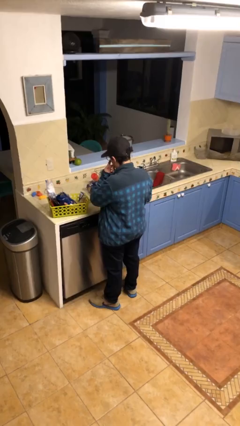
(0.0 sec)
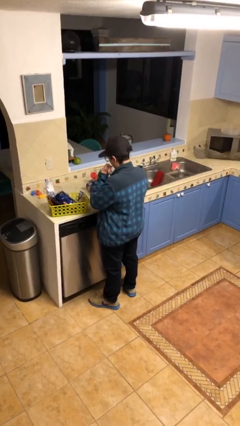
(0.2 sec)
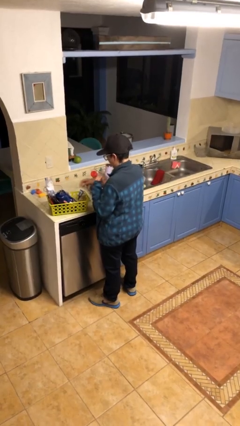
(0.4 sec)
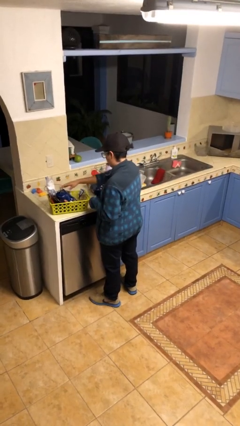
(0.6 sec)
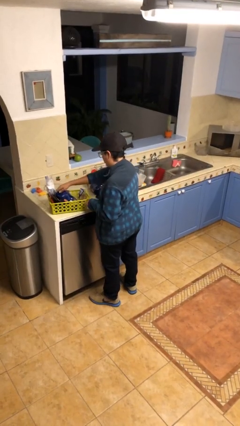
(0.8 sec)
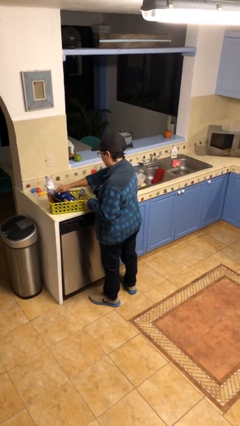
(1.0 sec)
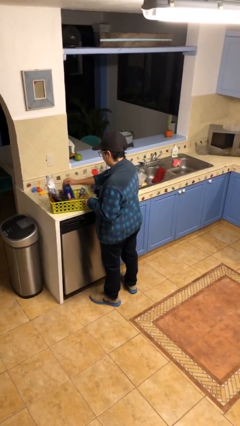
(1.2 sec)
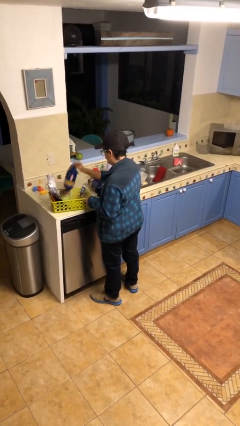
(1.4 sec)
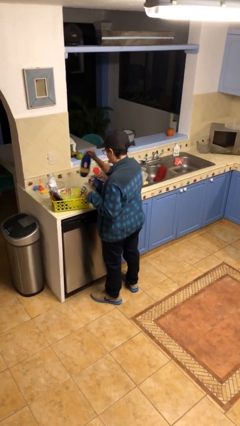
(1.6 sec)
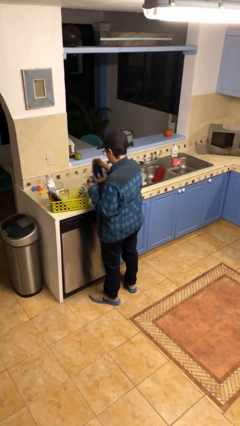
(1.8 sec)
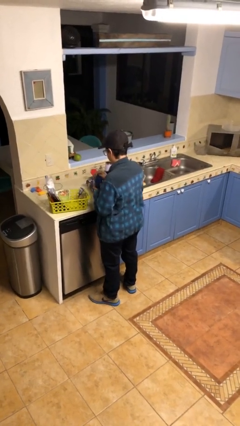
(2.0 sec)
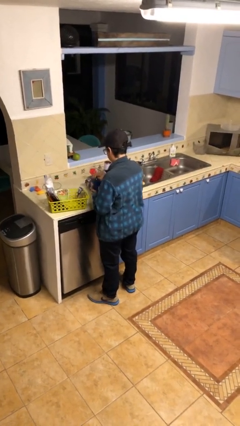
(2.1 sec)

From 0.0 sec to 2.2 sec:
person takes object from basket

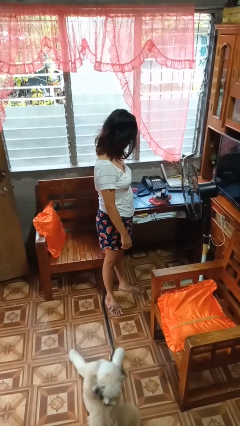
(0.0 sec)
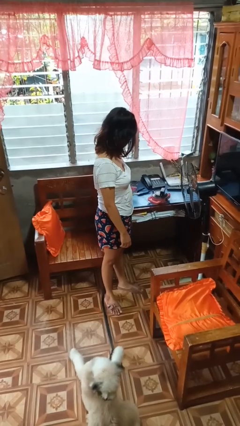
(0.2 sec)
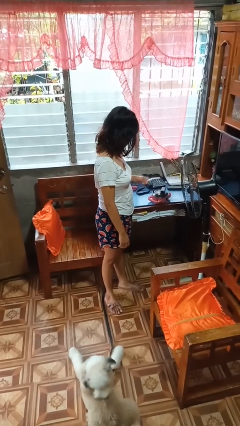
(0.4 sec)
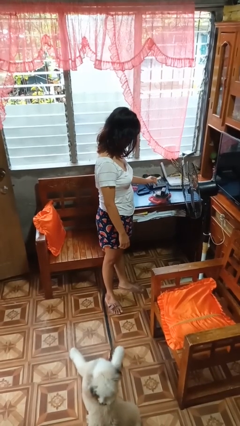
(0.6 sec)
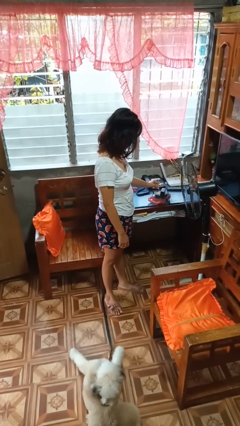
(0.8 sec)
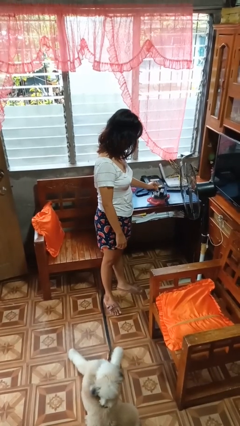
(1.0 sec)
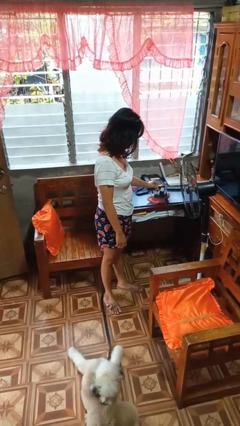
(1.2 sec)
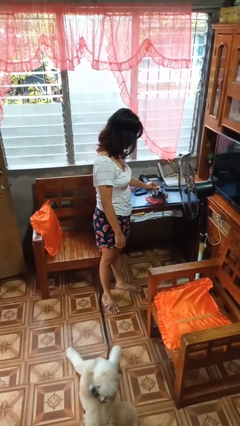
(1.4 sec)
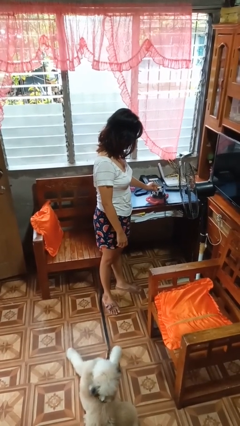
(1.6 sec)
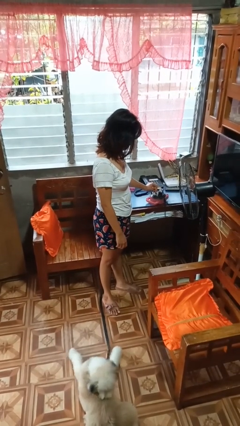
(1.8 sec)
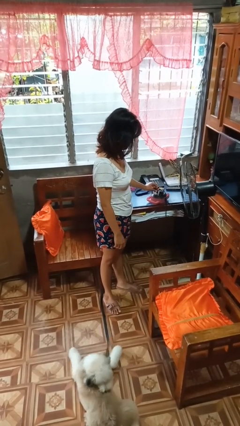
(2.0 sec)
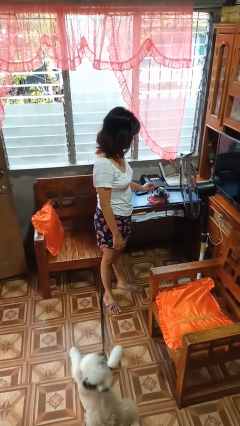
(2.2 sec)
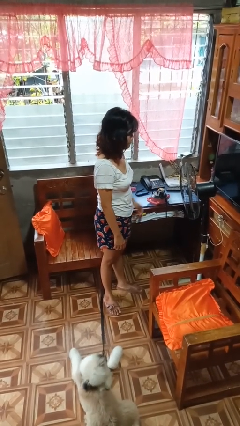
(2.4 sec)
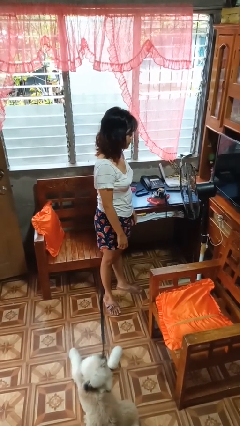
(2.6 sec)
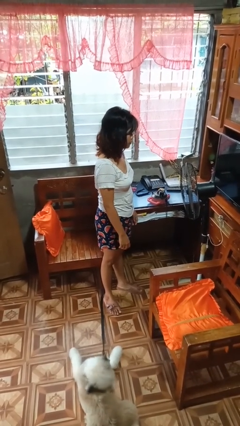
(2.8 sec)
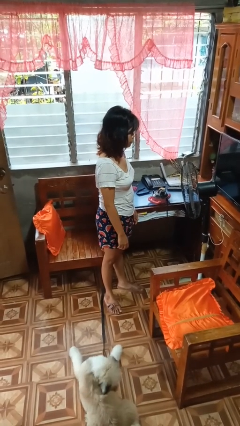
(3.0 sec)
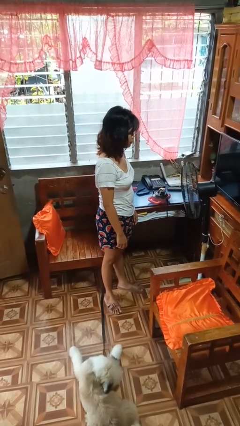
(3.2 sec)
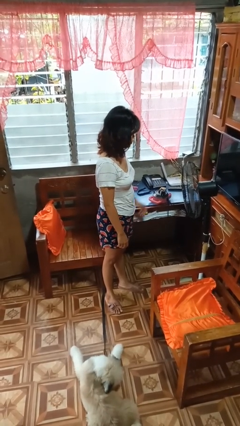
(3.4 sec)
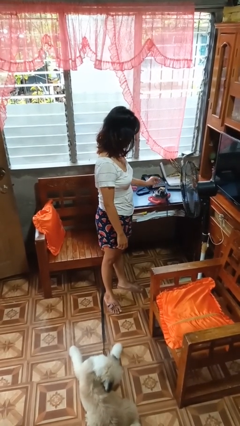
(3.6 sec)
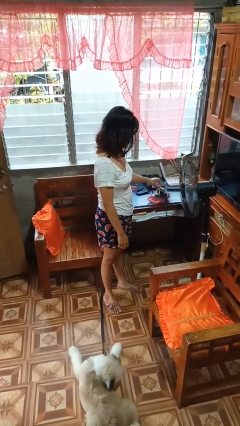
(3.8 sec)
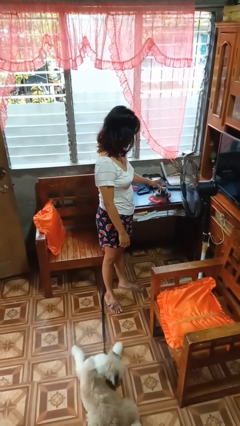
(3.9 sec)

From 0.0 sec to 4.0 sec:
person plugs into electrical socket

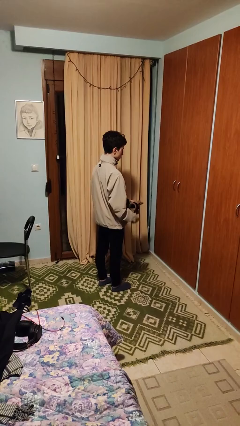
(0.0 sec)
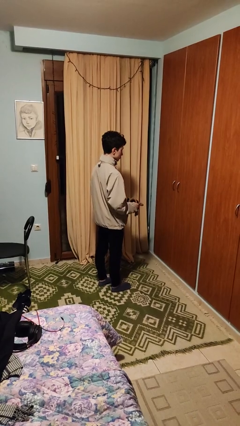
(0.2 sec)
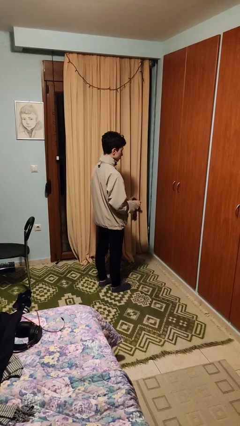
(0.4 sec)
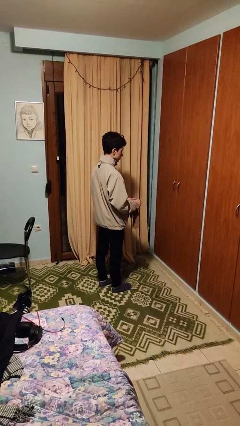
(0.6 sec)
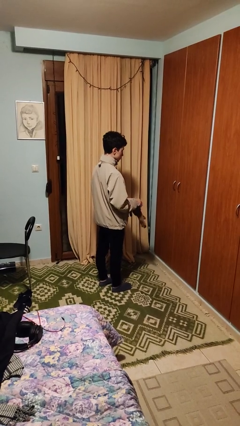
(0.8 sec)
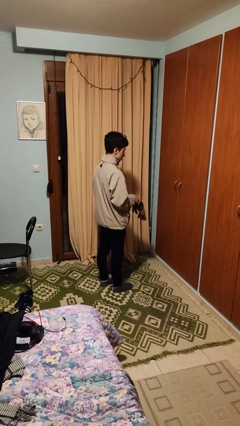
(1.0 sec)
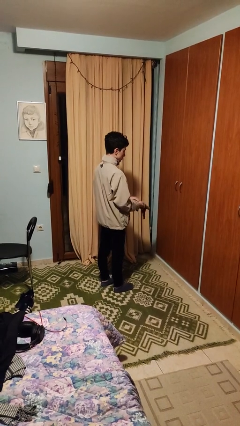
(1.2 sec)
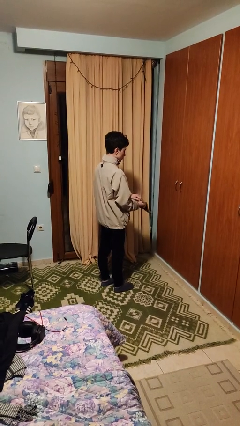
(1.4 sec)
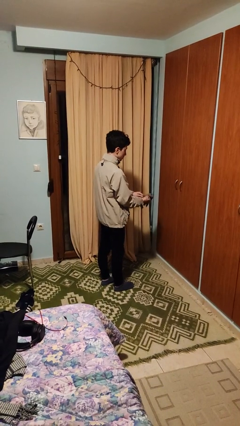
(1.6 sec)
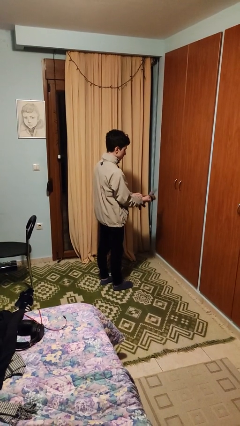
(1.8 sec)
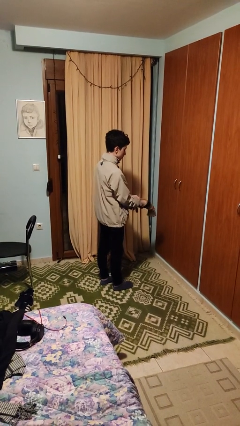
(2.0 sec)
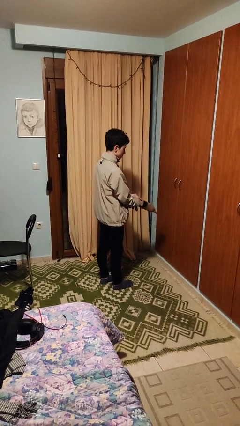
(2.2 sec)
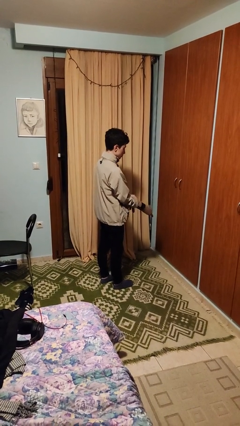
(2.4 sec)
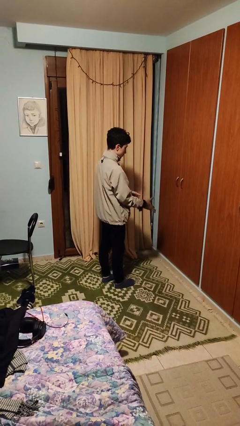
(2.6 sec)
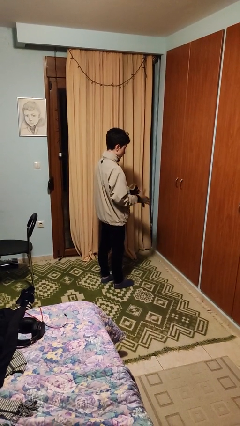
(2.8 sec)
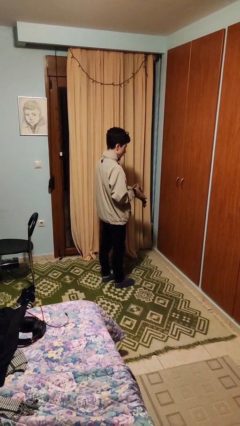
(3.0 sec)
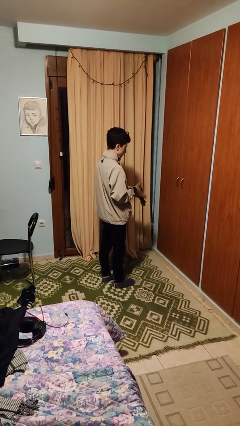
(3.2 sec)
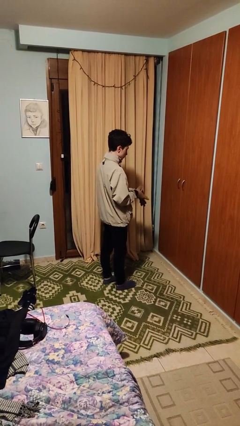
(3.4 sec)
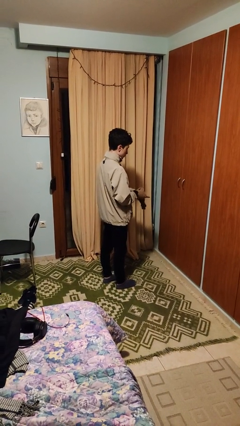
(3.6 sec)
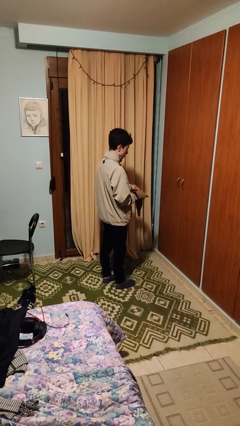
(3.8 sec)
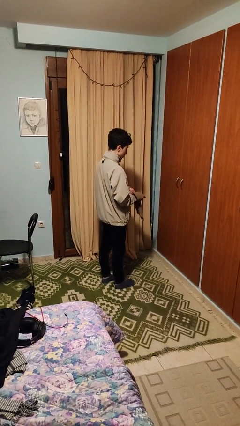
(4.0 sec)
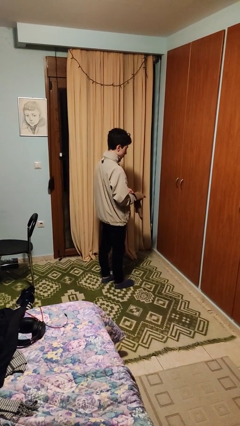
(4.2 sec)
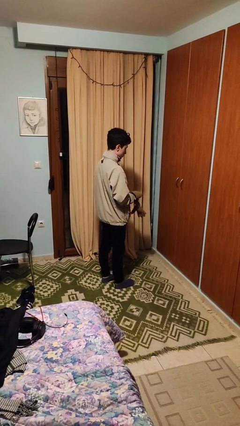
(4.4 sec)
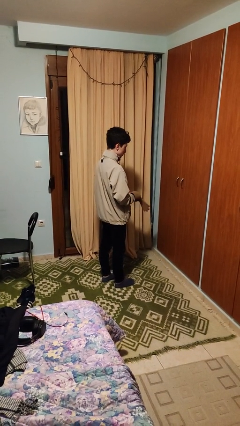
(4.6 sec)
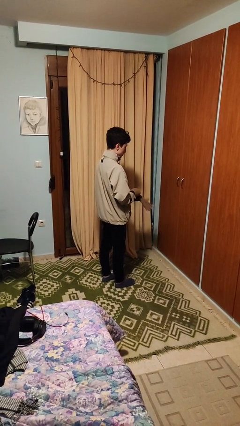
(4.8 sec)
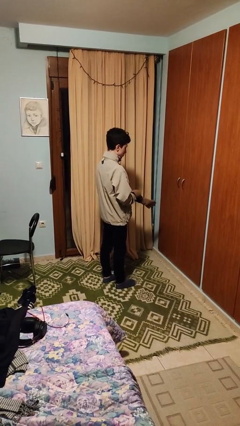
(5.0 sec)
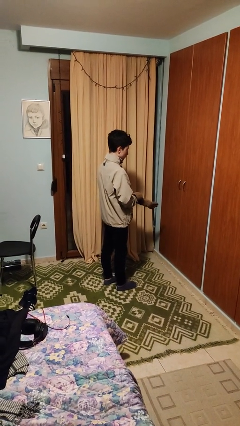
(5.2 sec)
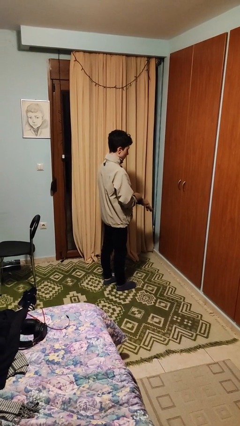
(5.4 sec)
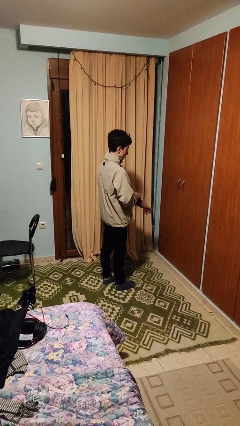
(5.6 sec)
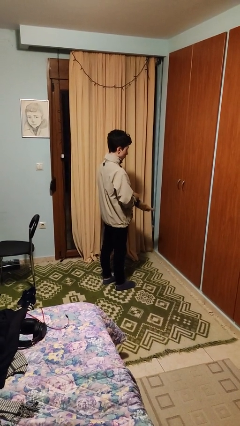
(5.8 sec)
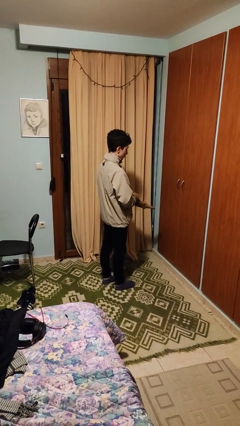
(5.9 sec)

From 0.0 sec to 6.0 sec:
person puts on gloves

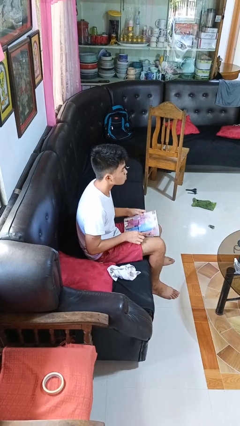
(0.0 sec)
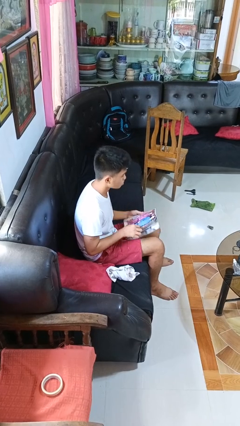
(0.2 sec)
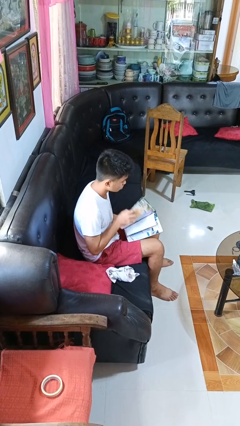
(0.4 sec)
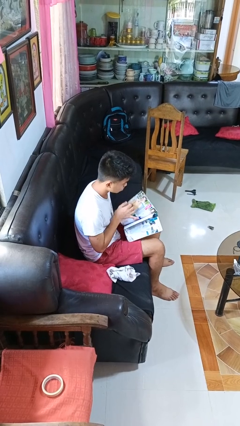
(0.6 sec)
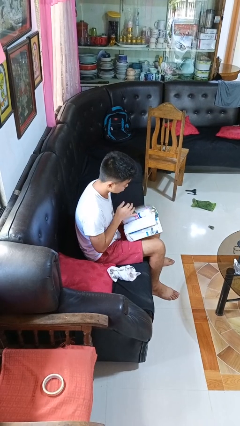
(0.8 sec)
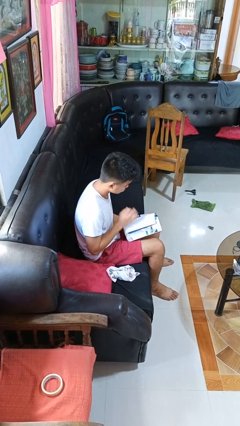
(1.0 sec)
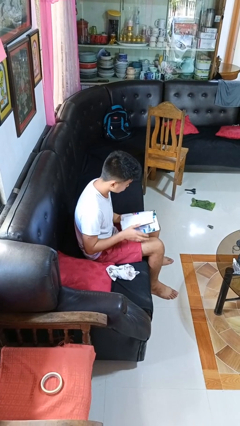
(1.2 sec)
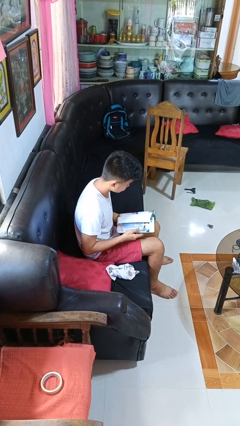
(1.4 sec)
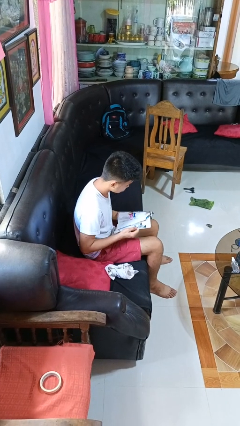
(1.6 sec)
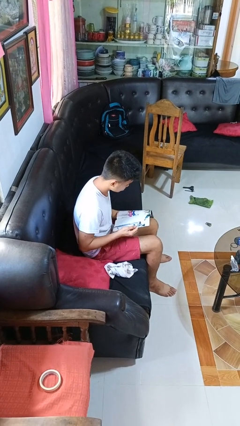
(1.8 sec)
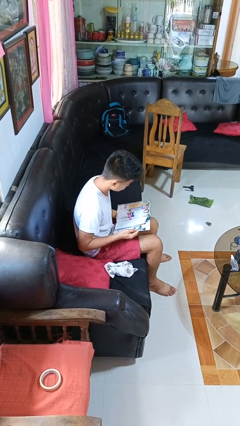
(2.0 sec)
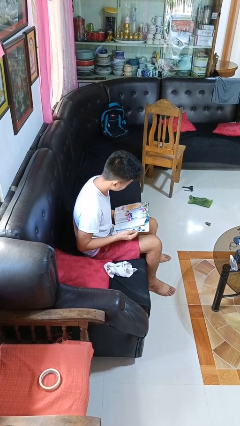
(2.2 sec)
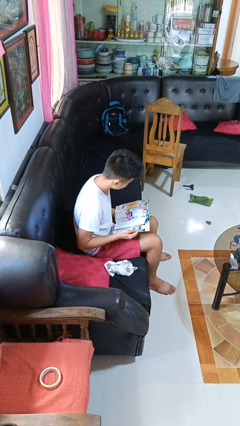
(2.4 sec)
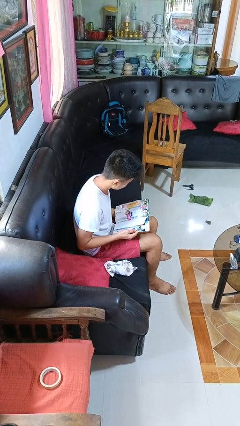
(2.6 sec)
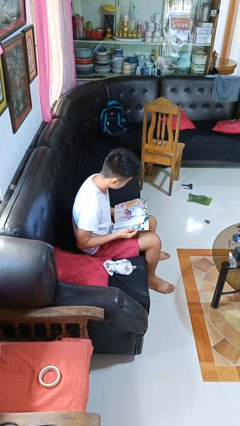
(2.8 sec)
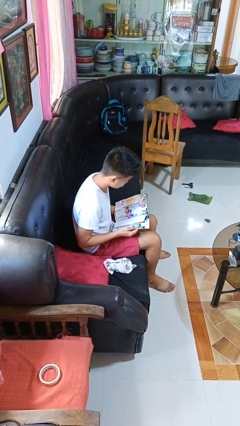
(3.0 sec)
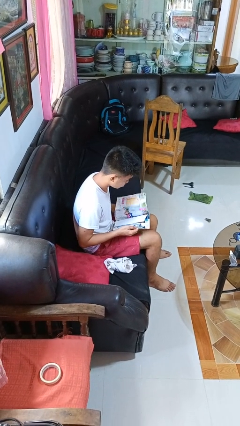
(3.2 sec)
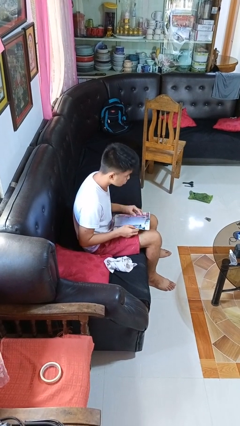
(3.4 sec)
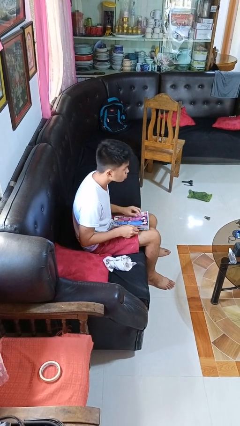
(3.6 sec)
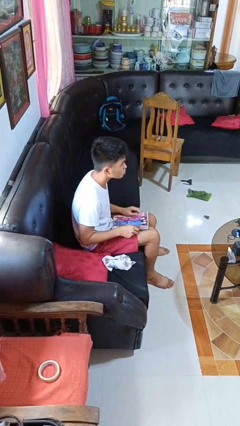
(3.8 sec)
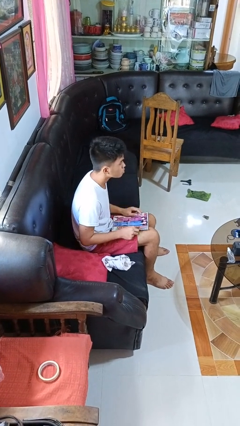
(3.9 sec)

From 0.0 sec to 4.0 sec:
person reads magazine

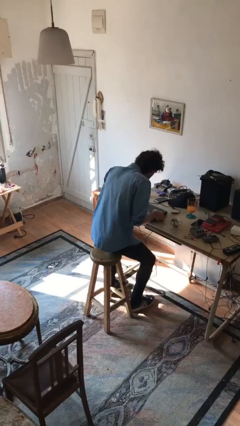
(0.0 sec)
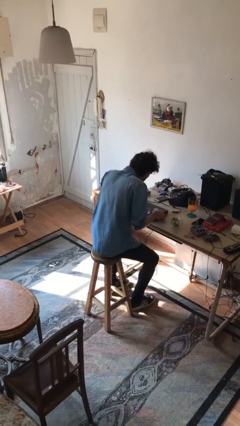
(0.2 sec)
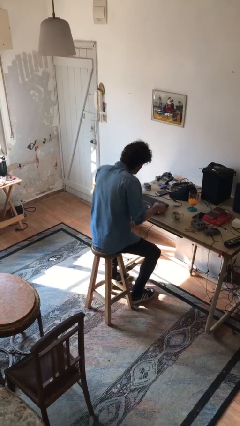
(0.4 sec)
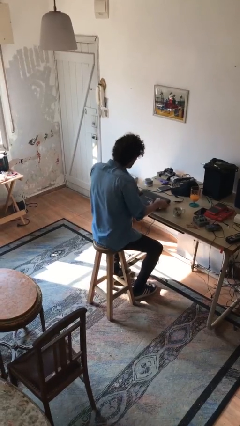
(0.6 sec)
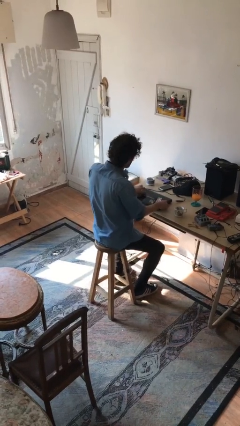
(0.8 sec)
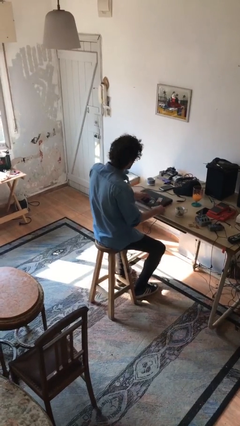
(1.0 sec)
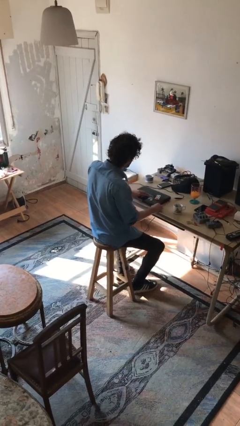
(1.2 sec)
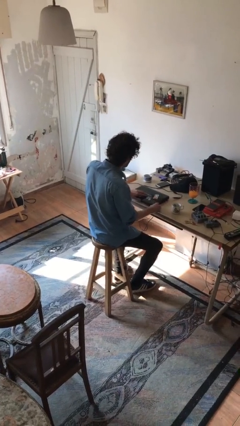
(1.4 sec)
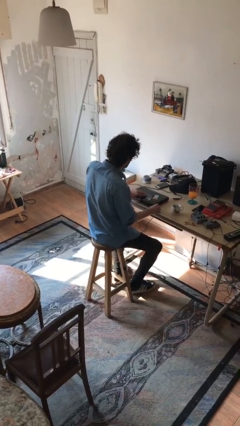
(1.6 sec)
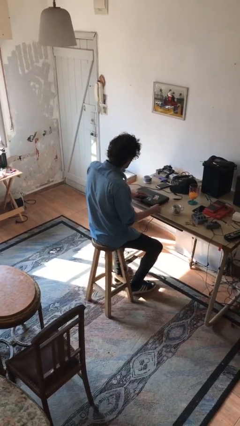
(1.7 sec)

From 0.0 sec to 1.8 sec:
person sits down
